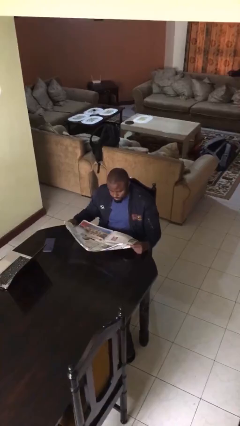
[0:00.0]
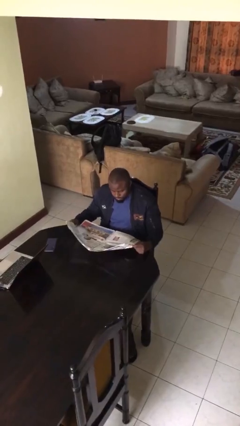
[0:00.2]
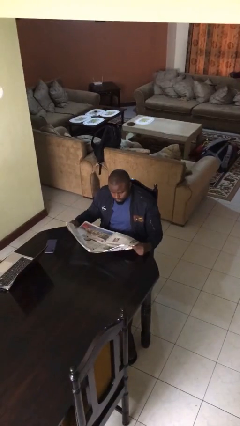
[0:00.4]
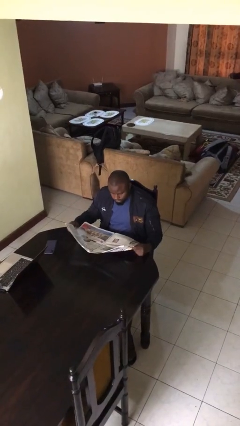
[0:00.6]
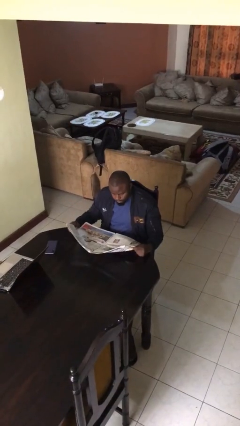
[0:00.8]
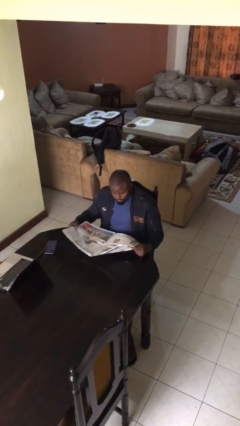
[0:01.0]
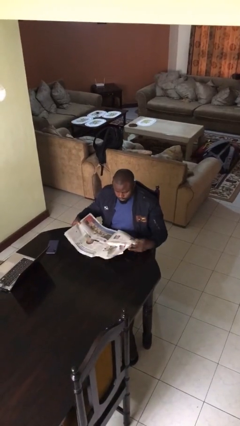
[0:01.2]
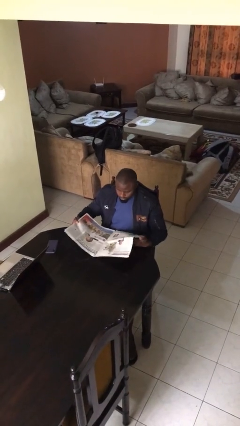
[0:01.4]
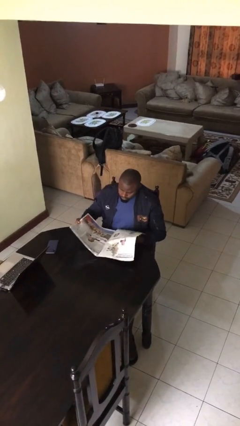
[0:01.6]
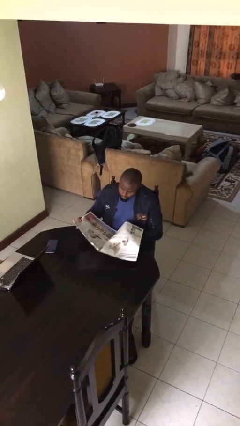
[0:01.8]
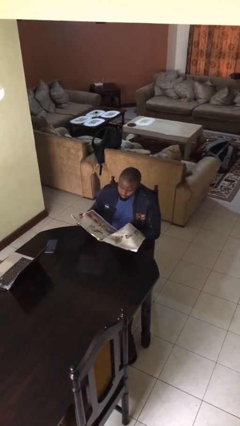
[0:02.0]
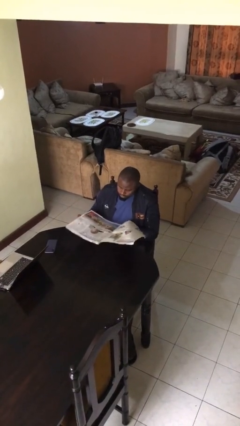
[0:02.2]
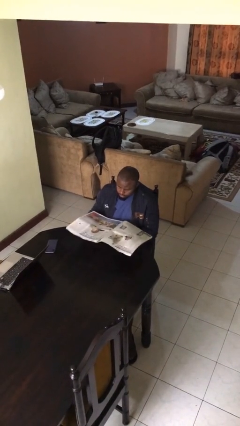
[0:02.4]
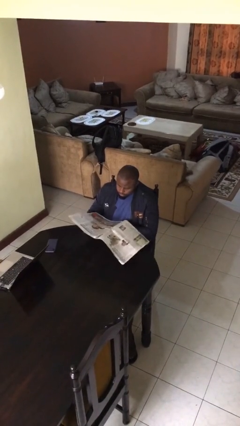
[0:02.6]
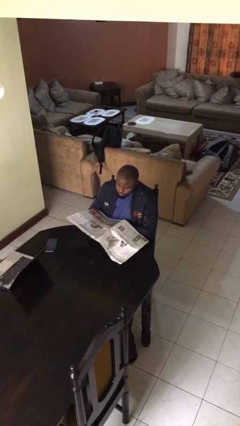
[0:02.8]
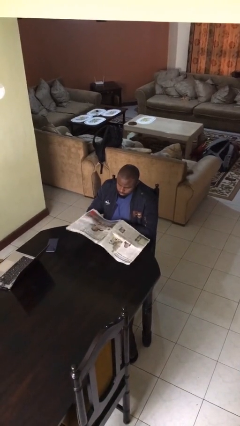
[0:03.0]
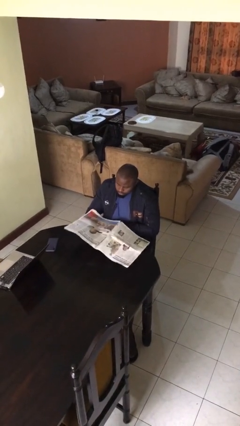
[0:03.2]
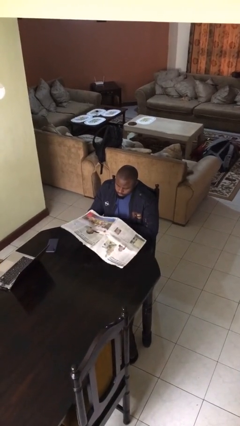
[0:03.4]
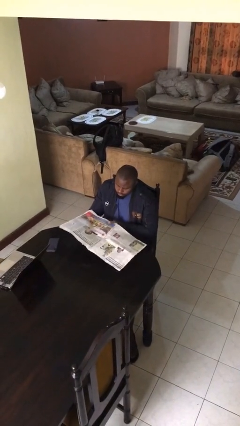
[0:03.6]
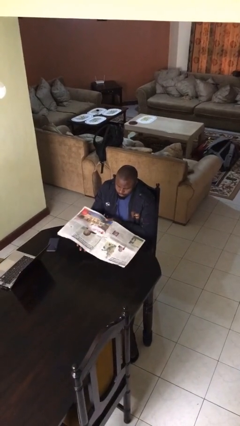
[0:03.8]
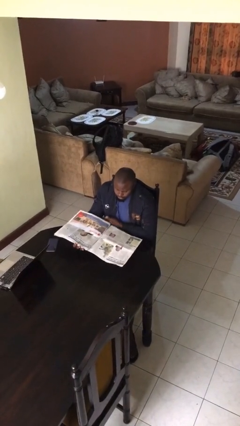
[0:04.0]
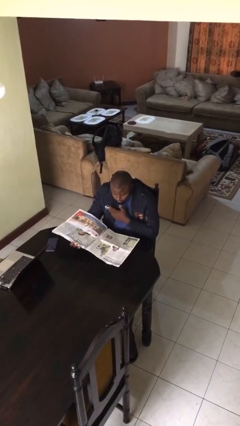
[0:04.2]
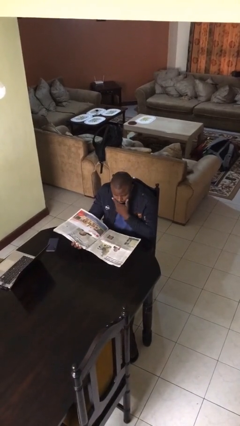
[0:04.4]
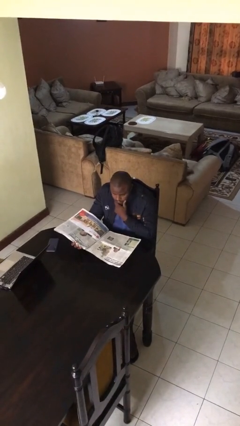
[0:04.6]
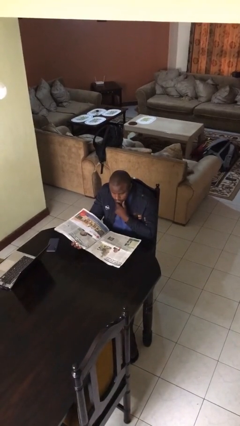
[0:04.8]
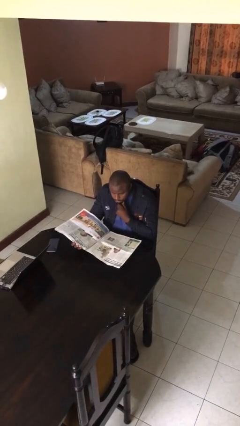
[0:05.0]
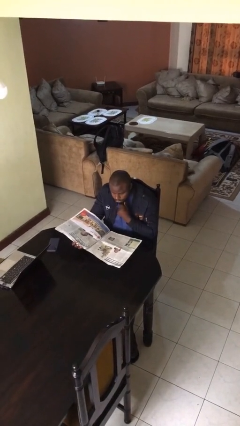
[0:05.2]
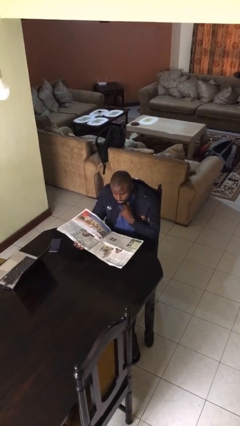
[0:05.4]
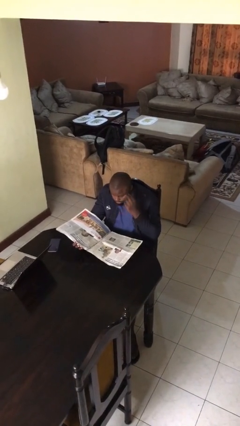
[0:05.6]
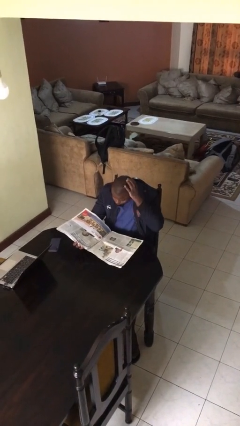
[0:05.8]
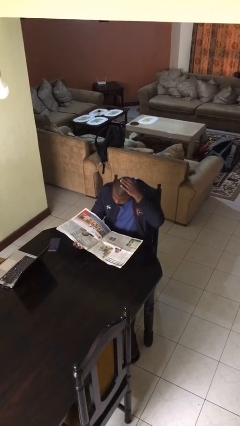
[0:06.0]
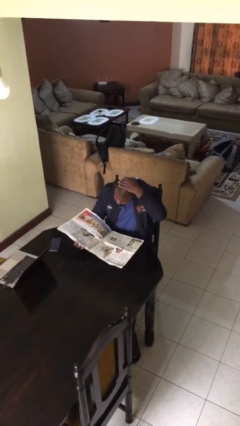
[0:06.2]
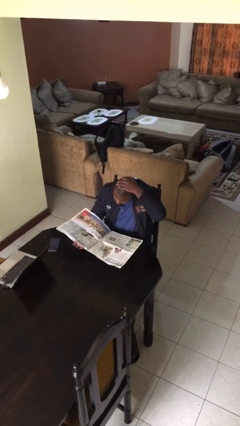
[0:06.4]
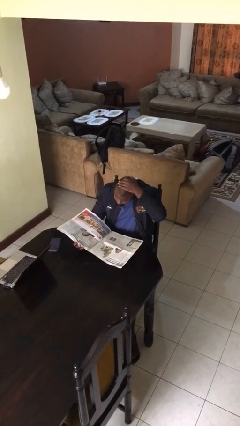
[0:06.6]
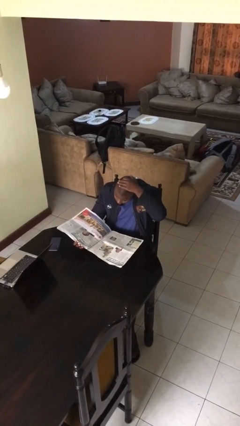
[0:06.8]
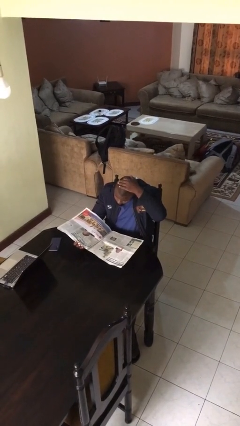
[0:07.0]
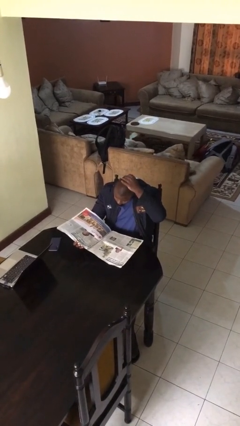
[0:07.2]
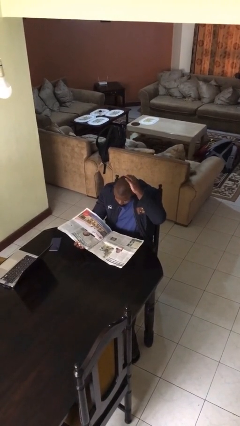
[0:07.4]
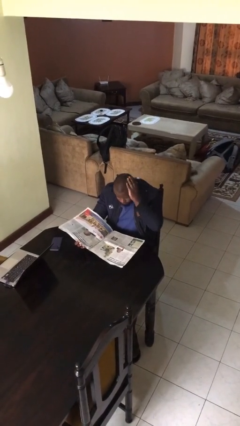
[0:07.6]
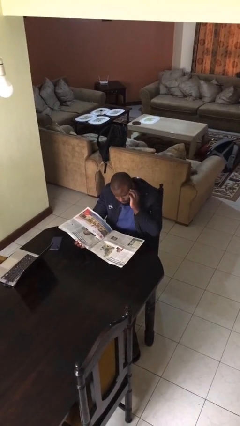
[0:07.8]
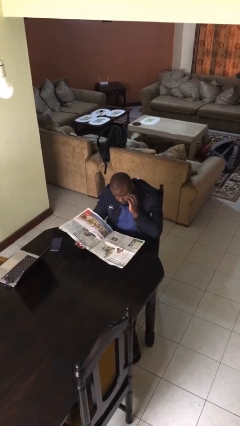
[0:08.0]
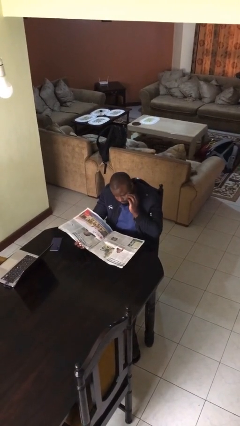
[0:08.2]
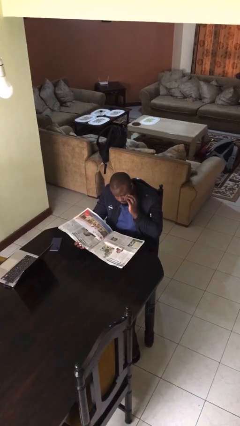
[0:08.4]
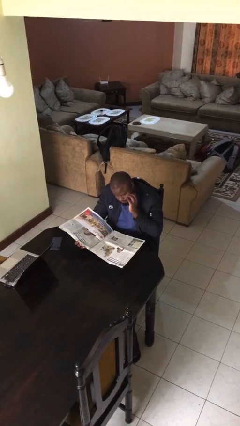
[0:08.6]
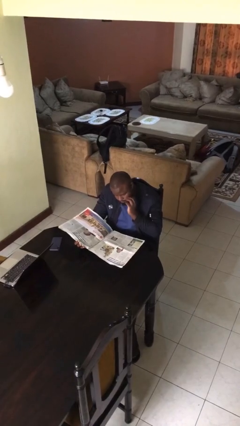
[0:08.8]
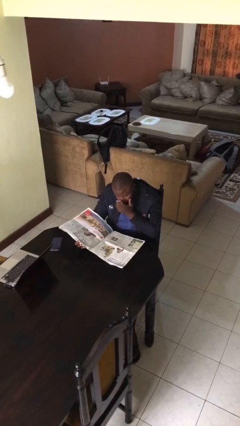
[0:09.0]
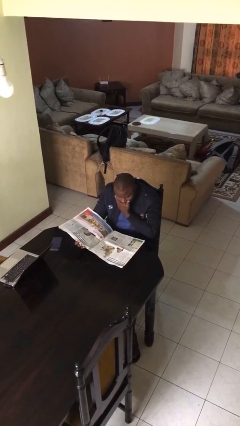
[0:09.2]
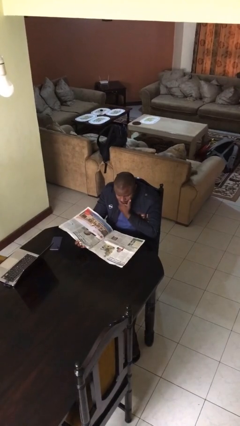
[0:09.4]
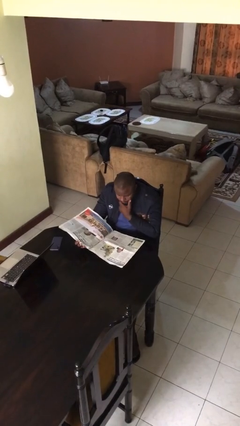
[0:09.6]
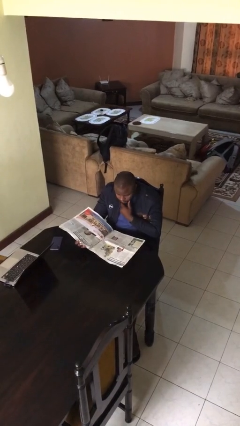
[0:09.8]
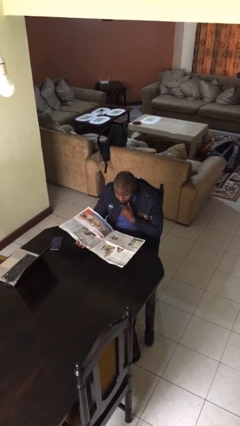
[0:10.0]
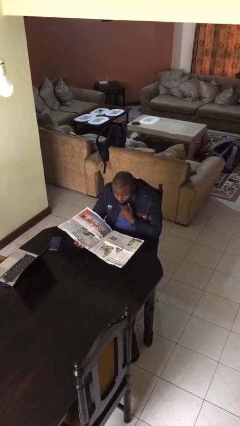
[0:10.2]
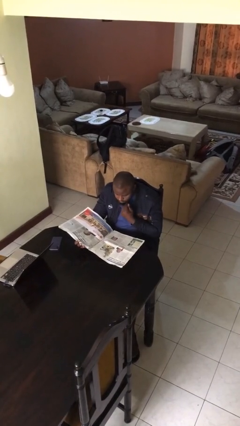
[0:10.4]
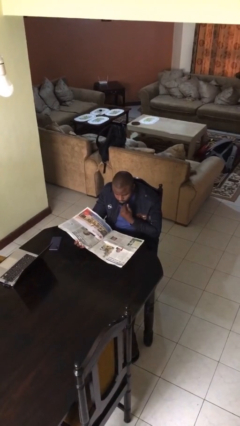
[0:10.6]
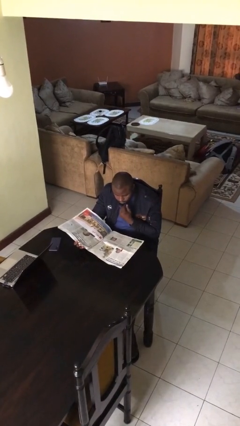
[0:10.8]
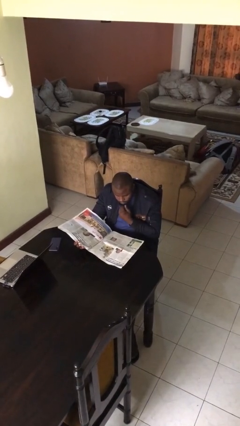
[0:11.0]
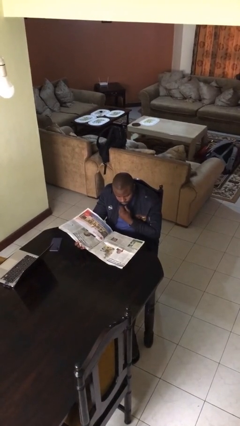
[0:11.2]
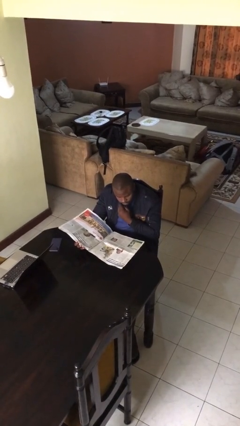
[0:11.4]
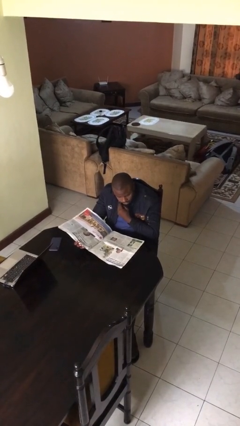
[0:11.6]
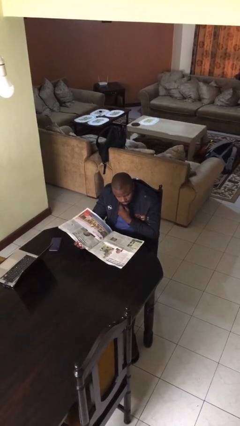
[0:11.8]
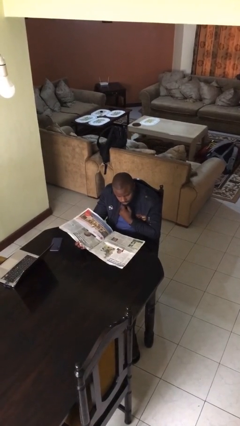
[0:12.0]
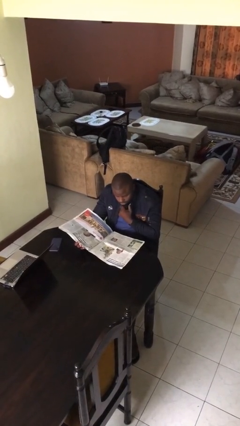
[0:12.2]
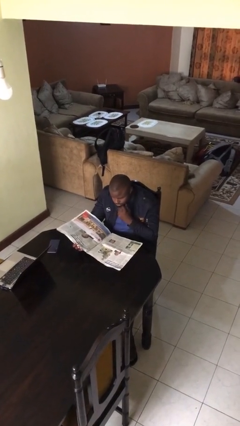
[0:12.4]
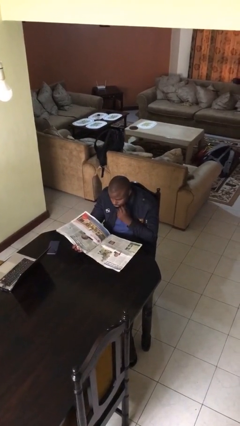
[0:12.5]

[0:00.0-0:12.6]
person reads document

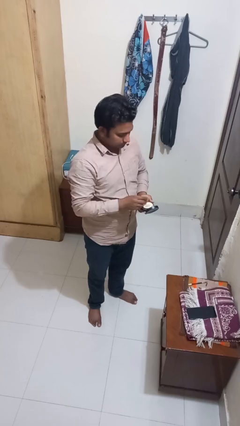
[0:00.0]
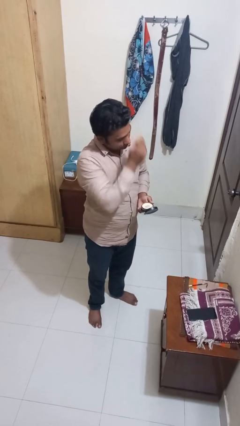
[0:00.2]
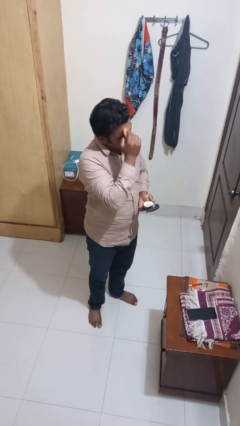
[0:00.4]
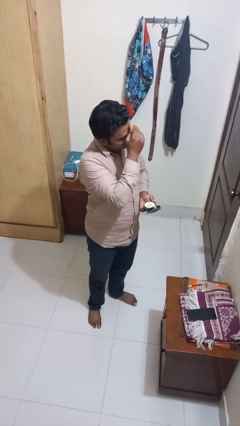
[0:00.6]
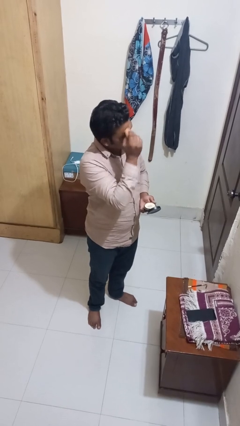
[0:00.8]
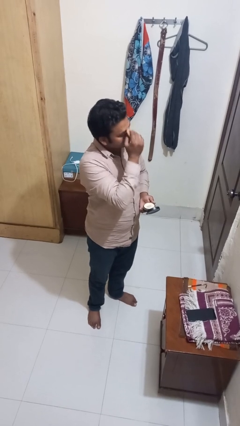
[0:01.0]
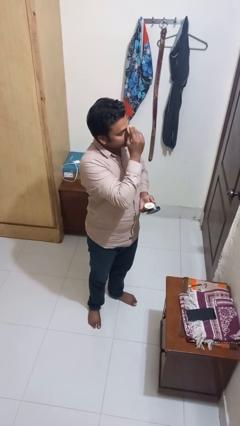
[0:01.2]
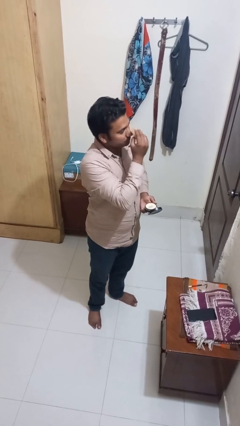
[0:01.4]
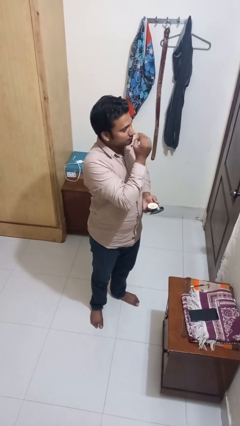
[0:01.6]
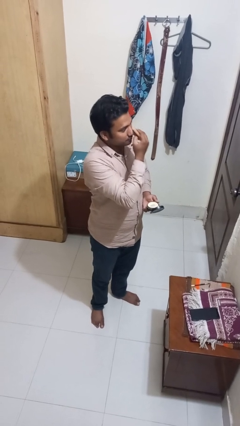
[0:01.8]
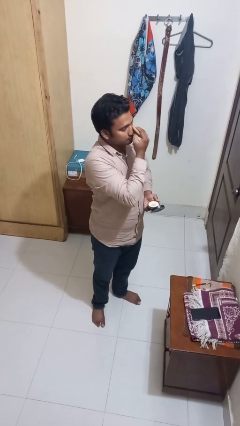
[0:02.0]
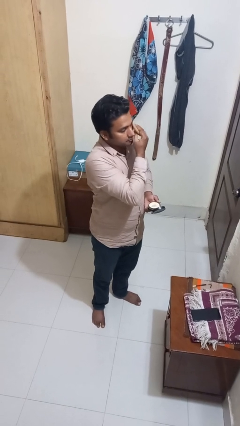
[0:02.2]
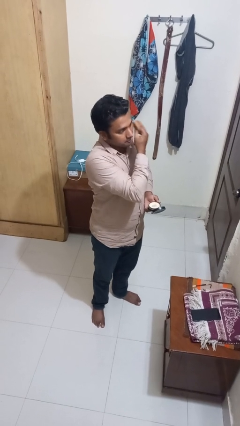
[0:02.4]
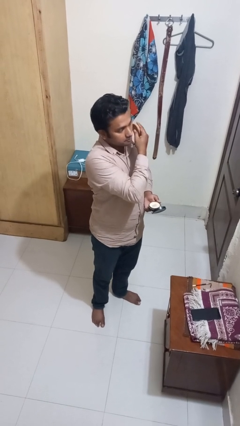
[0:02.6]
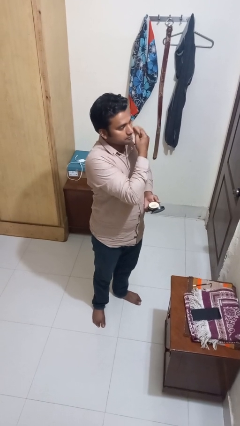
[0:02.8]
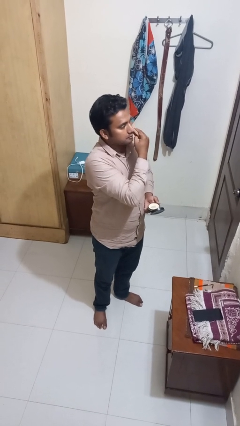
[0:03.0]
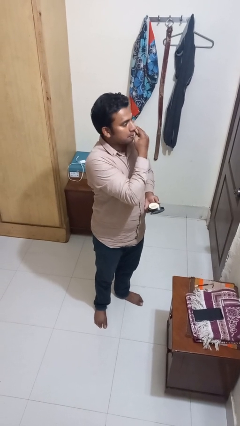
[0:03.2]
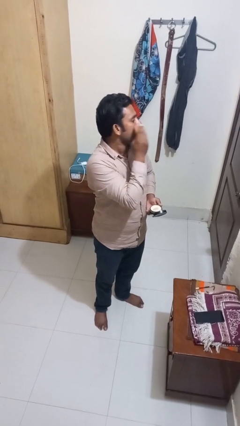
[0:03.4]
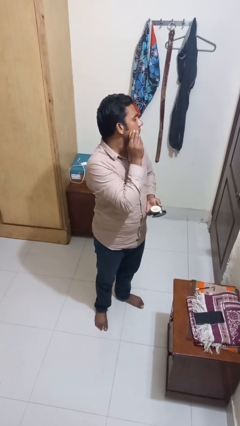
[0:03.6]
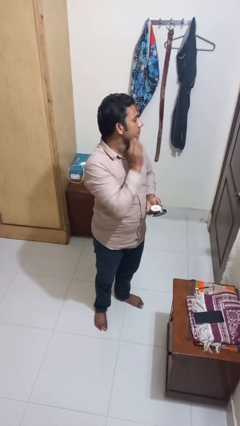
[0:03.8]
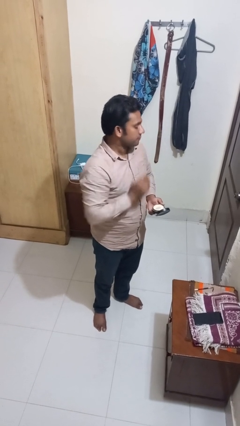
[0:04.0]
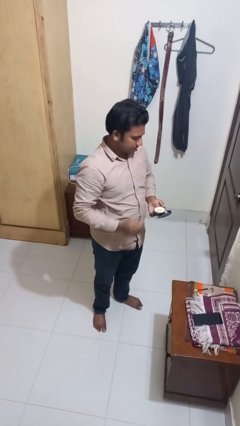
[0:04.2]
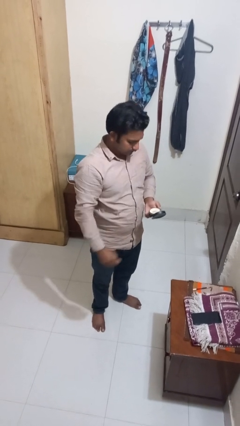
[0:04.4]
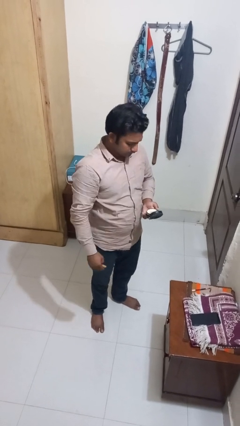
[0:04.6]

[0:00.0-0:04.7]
person applies foundation makeup

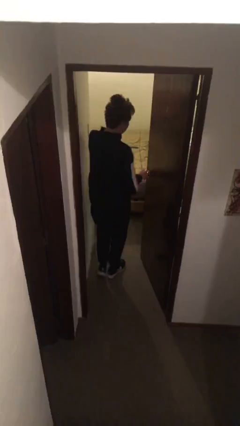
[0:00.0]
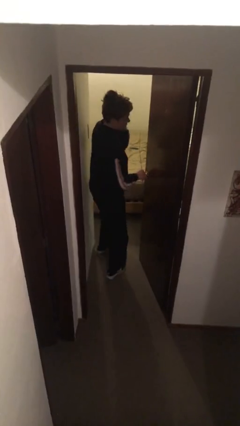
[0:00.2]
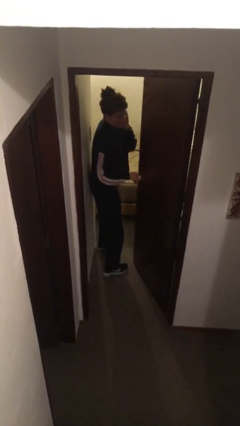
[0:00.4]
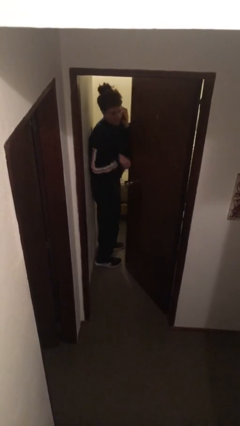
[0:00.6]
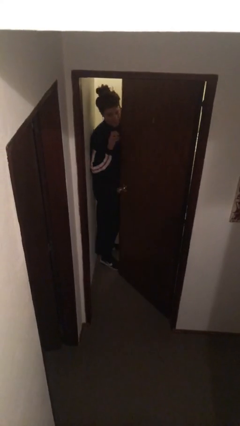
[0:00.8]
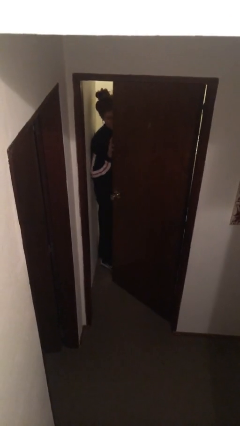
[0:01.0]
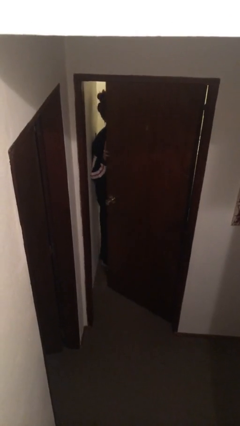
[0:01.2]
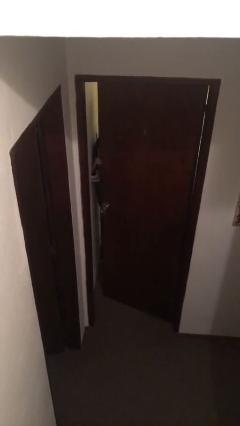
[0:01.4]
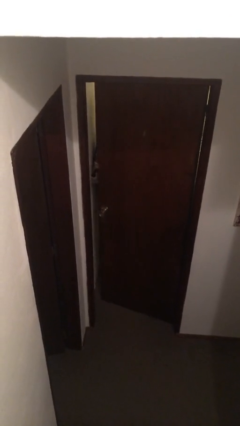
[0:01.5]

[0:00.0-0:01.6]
person closes facility door
